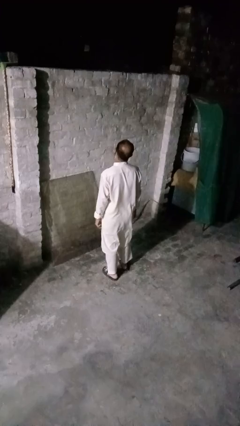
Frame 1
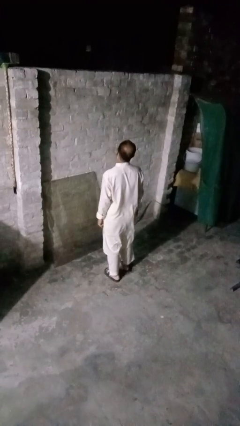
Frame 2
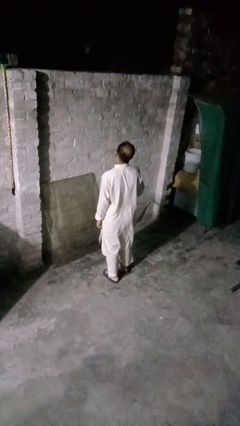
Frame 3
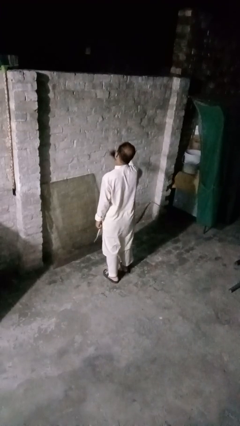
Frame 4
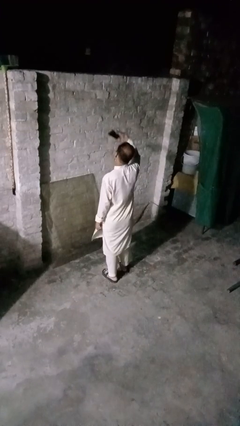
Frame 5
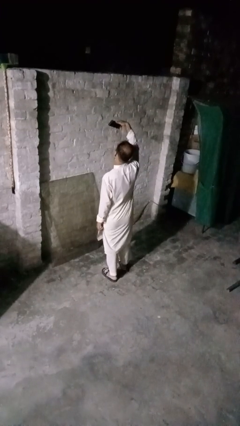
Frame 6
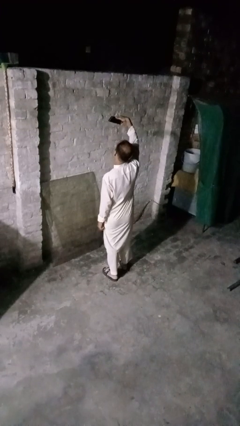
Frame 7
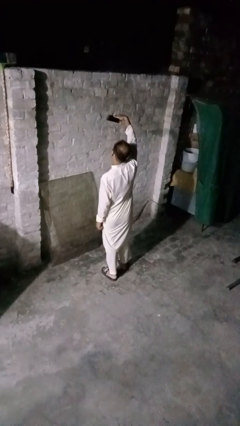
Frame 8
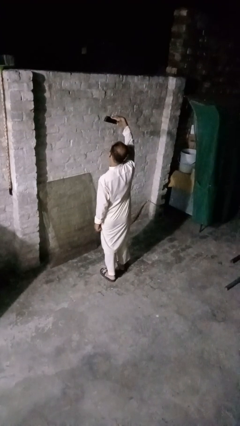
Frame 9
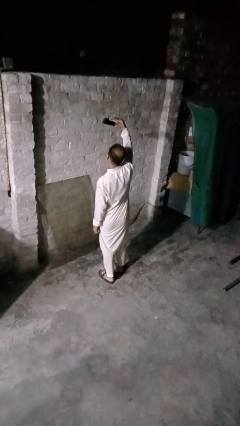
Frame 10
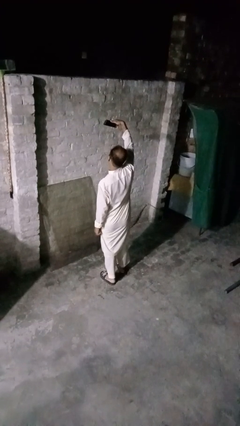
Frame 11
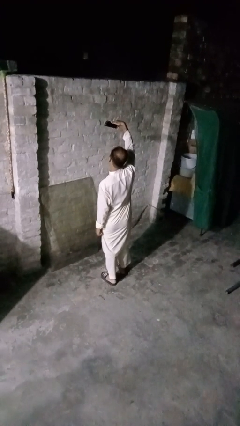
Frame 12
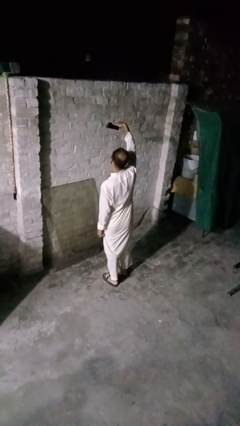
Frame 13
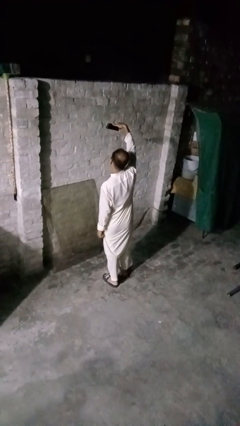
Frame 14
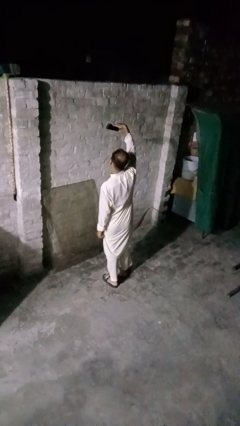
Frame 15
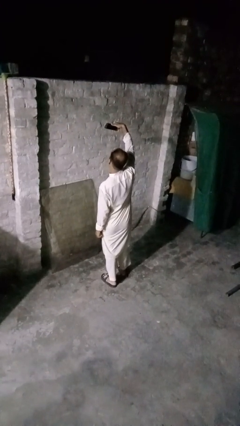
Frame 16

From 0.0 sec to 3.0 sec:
person takes selfie

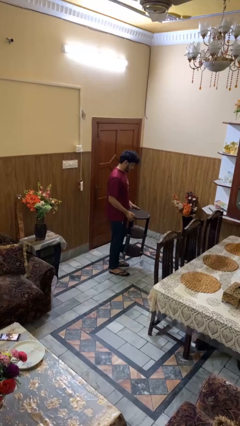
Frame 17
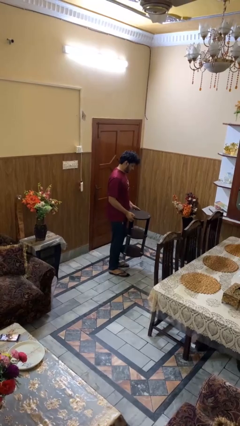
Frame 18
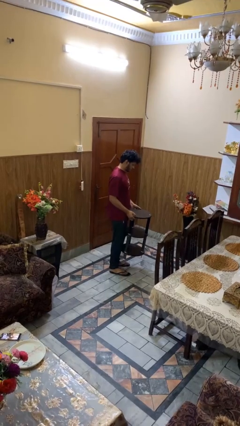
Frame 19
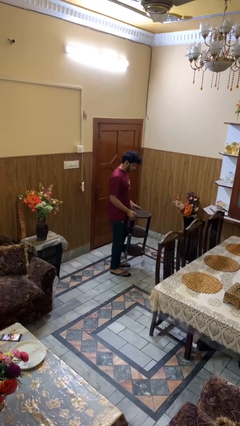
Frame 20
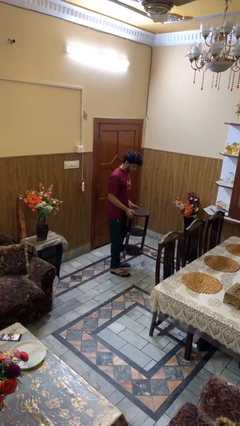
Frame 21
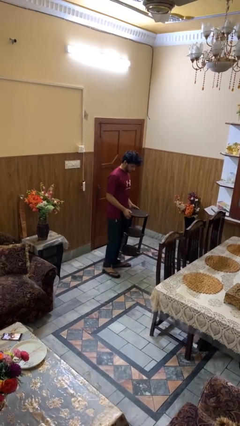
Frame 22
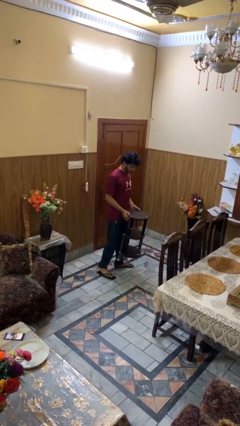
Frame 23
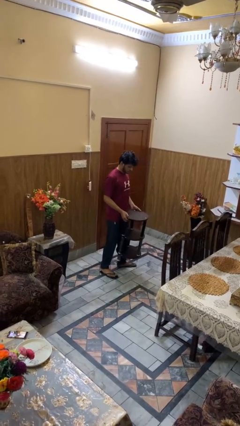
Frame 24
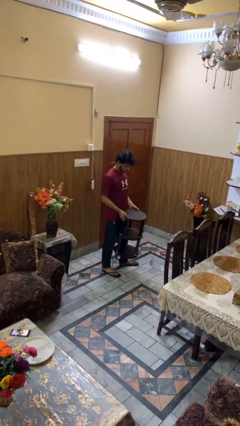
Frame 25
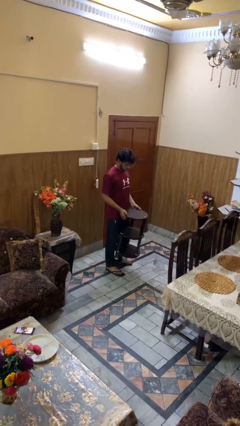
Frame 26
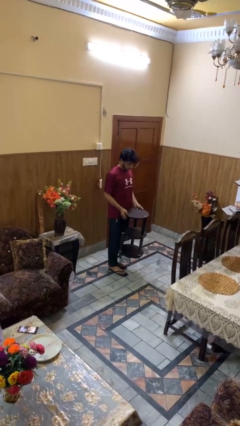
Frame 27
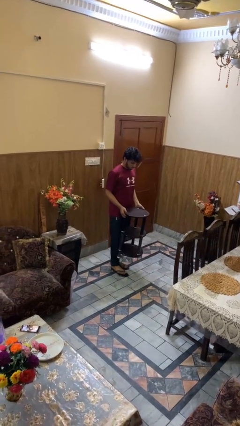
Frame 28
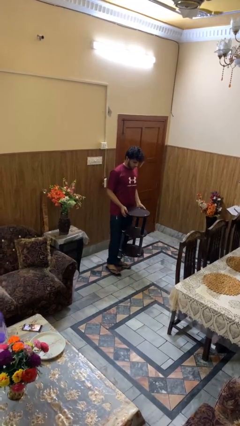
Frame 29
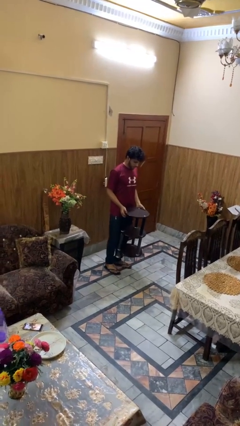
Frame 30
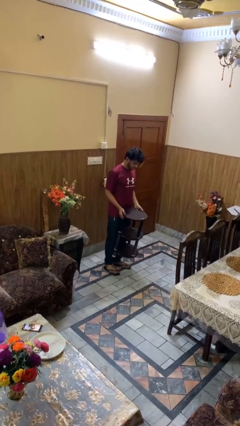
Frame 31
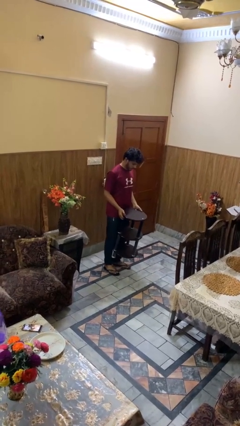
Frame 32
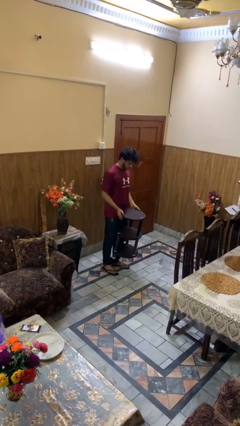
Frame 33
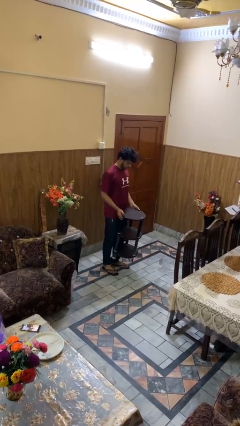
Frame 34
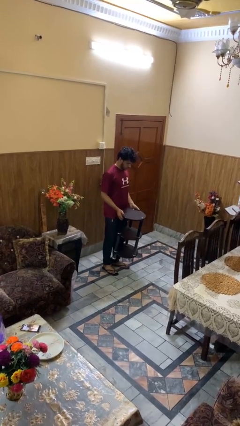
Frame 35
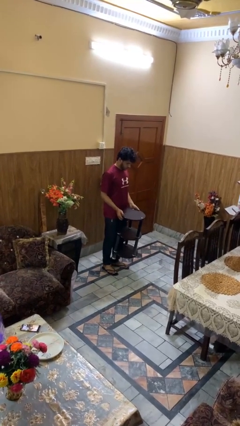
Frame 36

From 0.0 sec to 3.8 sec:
person carries furniture

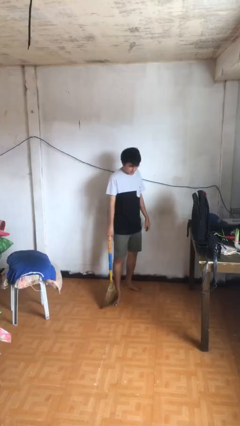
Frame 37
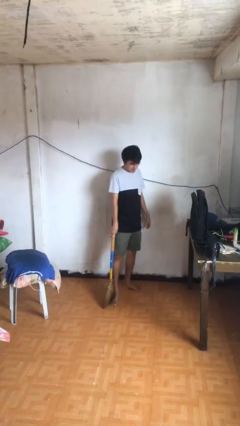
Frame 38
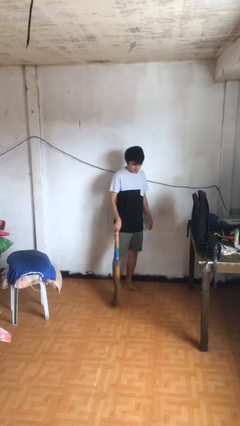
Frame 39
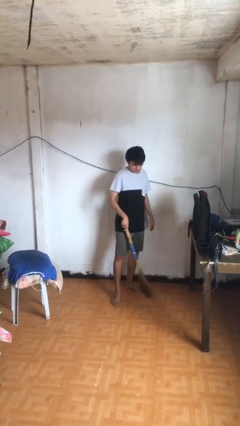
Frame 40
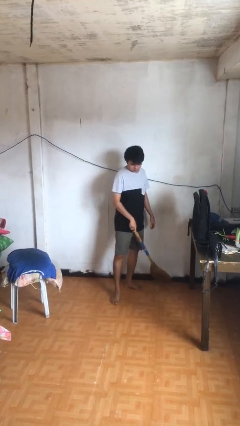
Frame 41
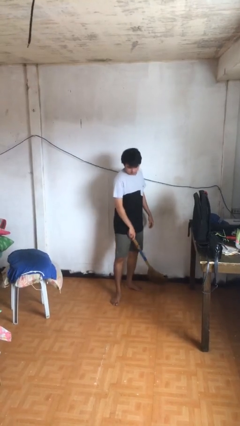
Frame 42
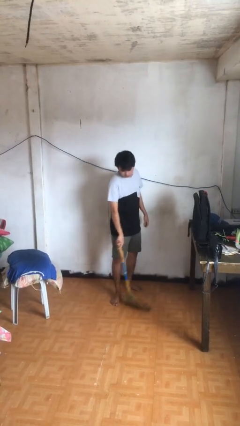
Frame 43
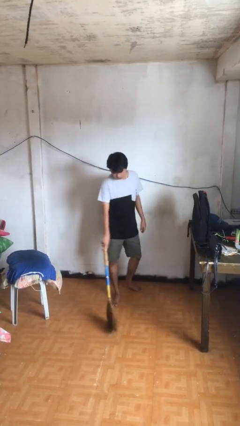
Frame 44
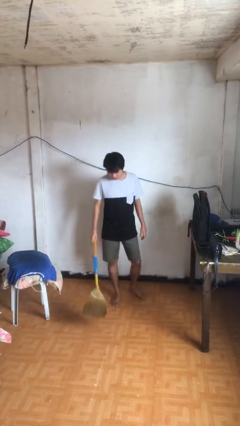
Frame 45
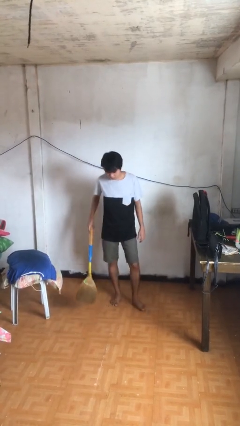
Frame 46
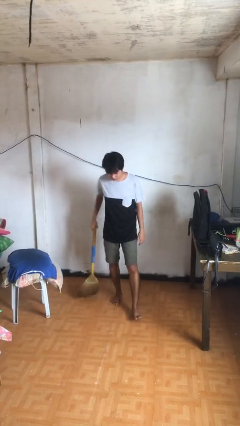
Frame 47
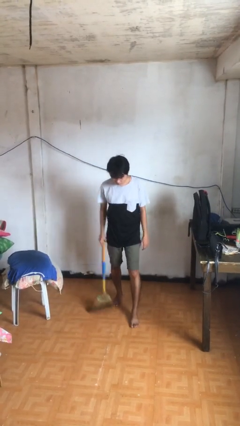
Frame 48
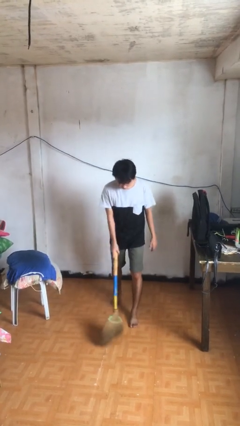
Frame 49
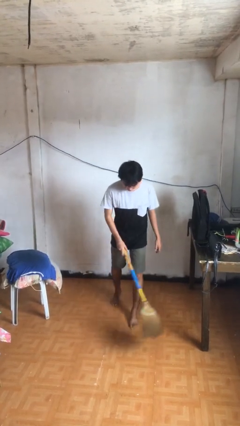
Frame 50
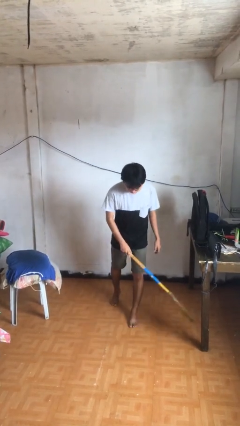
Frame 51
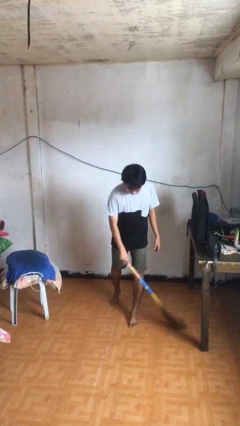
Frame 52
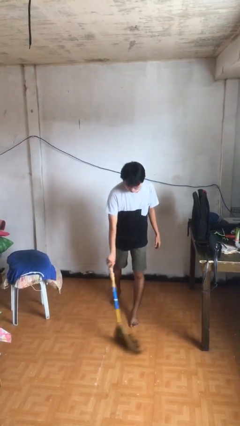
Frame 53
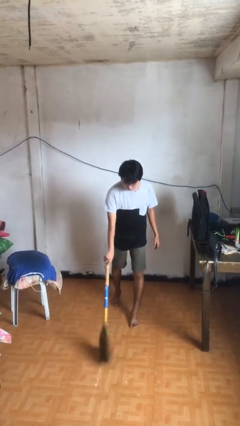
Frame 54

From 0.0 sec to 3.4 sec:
person sweeps floor

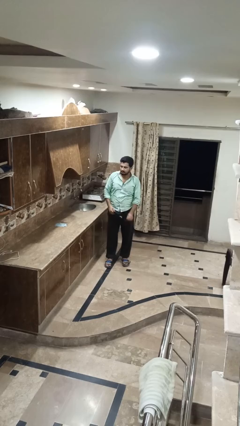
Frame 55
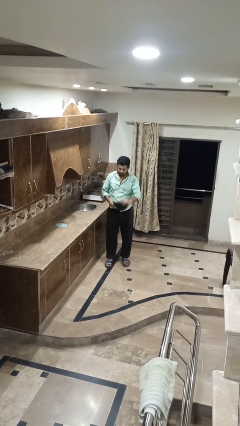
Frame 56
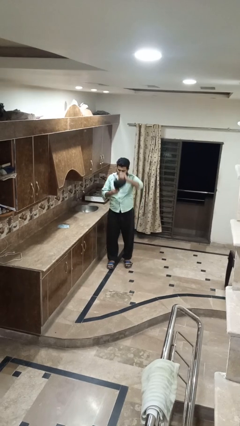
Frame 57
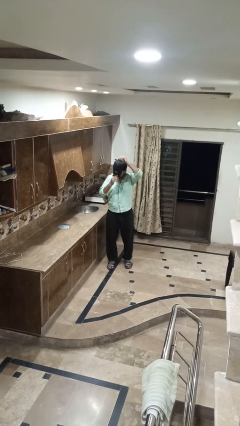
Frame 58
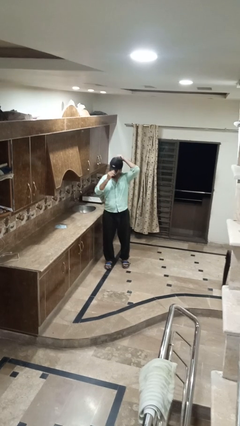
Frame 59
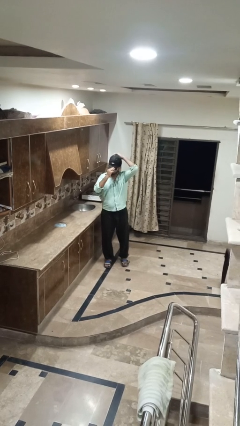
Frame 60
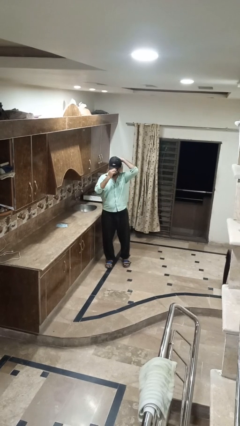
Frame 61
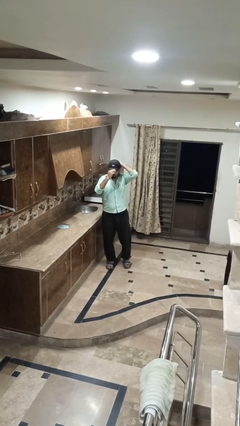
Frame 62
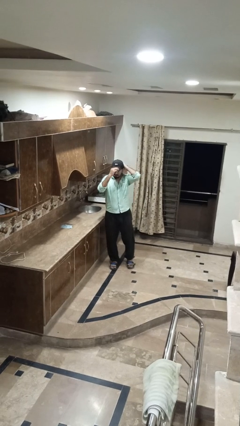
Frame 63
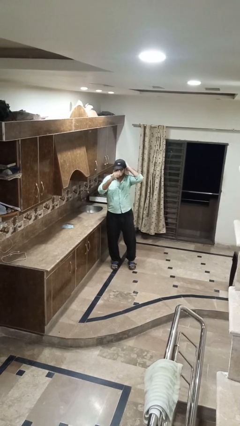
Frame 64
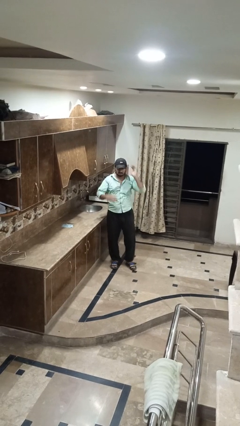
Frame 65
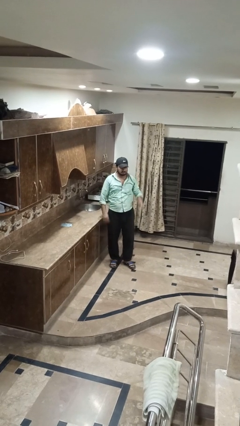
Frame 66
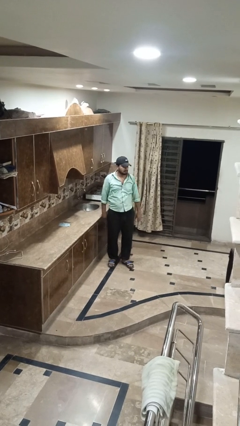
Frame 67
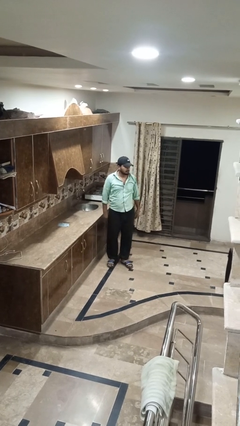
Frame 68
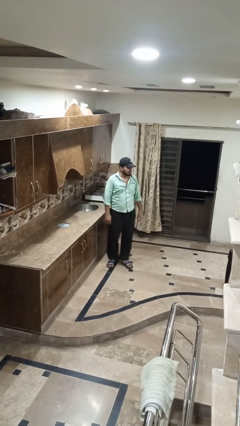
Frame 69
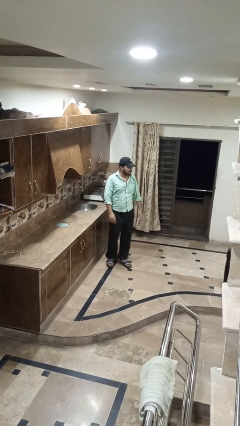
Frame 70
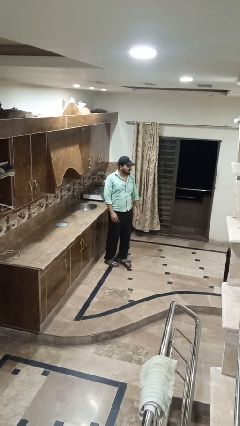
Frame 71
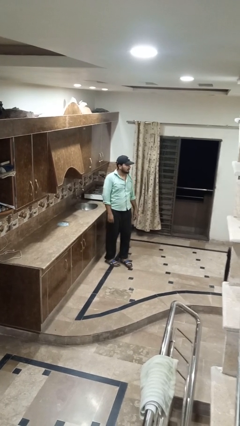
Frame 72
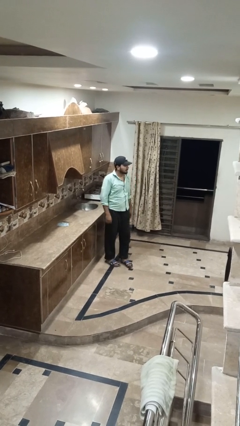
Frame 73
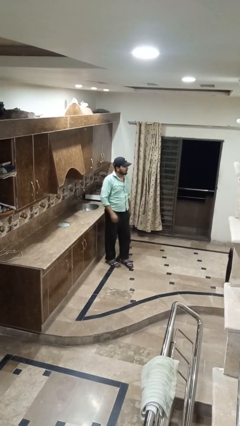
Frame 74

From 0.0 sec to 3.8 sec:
person puts on hat

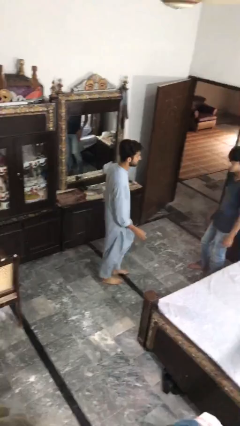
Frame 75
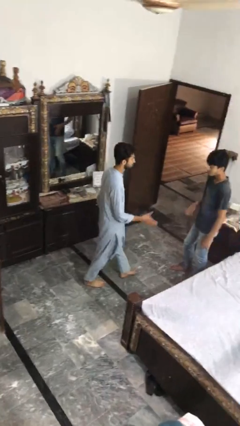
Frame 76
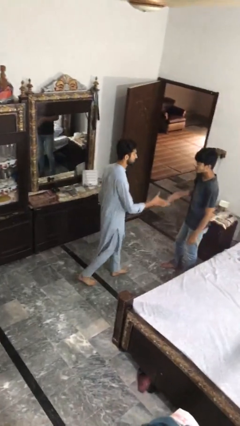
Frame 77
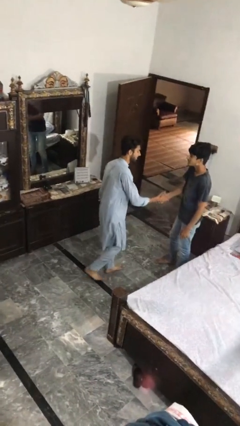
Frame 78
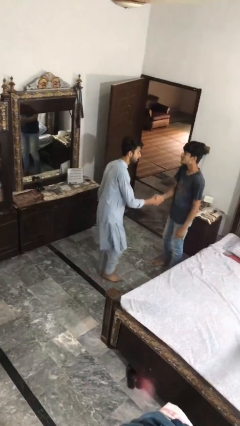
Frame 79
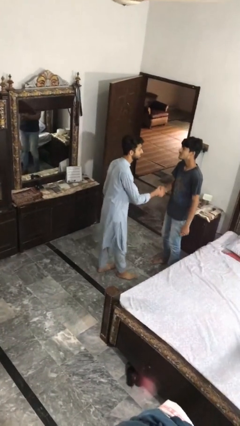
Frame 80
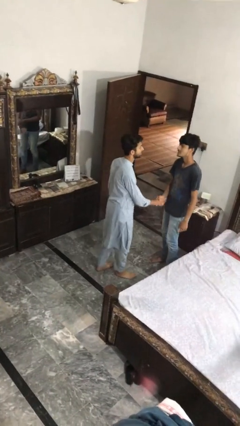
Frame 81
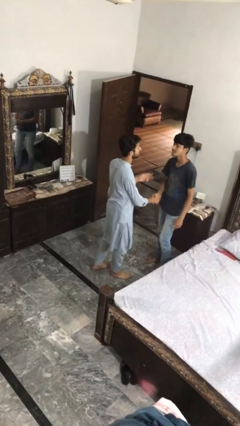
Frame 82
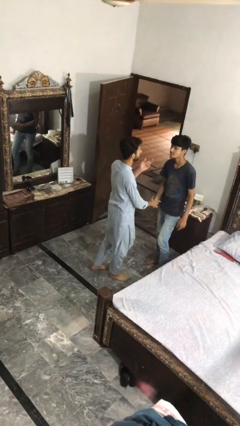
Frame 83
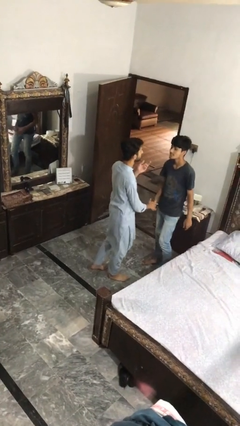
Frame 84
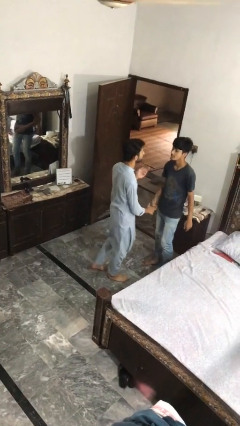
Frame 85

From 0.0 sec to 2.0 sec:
person shakes hand

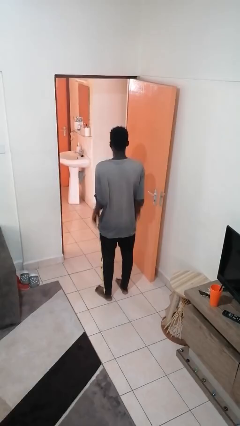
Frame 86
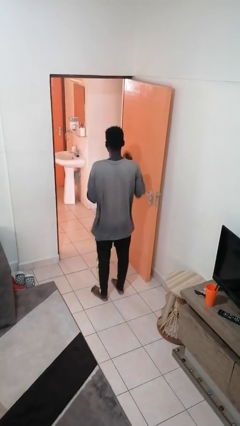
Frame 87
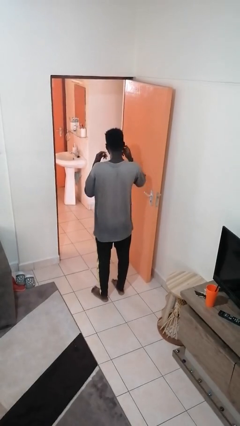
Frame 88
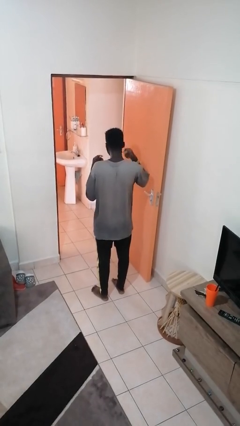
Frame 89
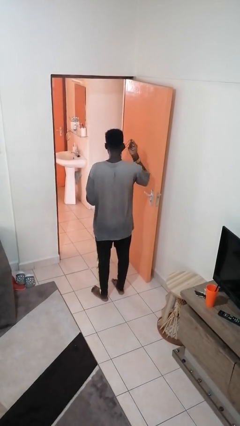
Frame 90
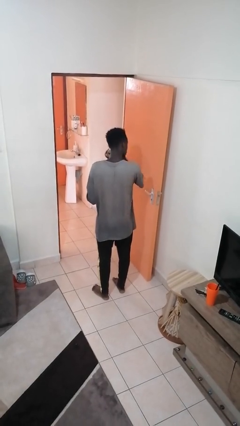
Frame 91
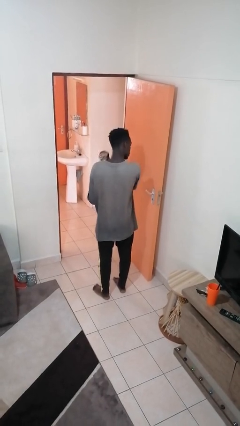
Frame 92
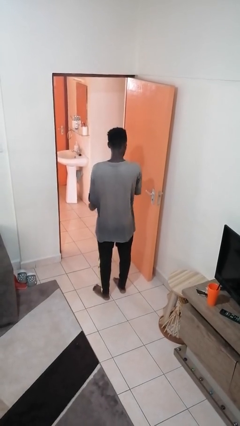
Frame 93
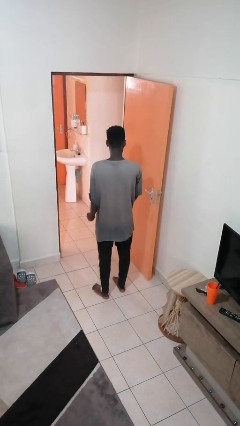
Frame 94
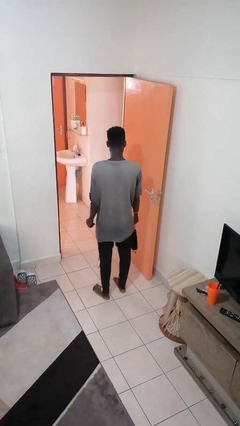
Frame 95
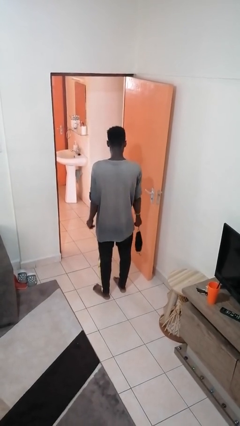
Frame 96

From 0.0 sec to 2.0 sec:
person takes off facemask
